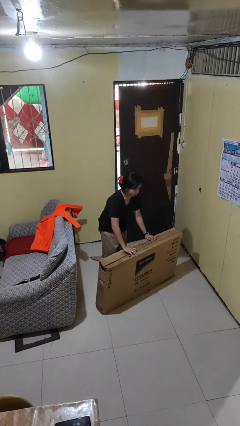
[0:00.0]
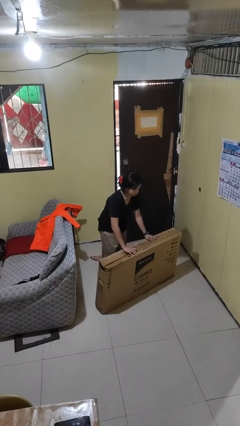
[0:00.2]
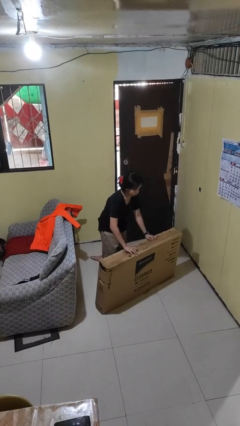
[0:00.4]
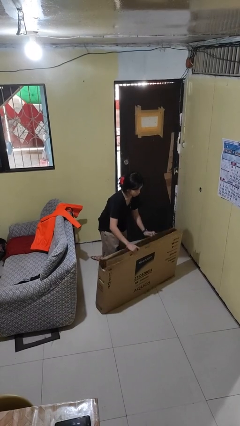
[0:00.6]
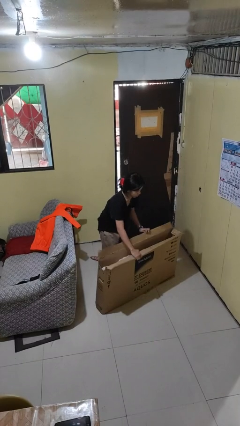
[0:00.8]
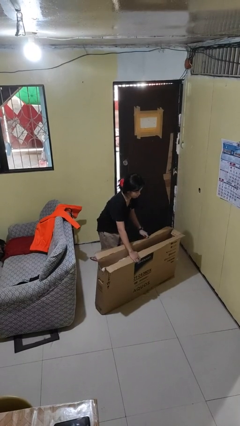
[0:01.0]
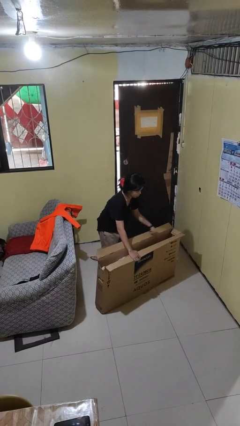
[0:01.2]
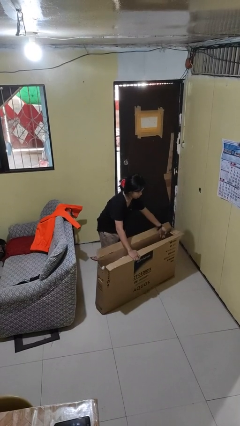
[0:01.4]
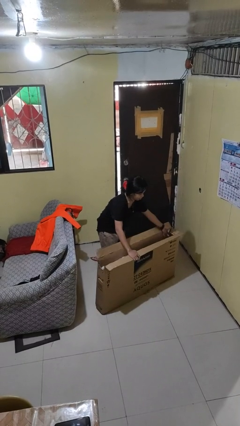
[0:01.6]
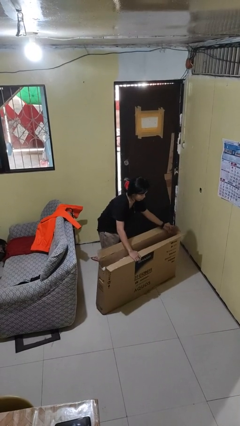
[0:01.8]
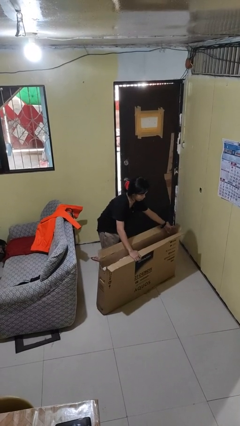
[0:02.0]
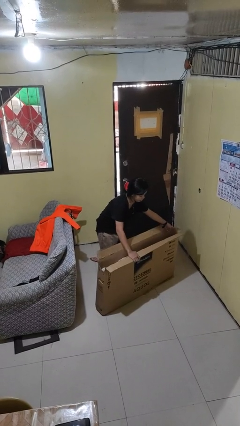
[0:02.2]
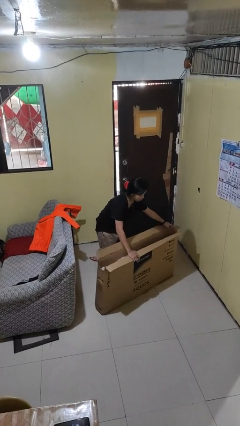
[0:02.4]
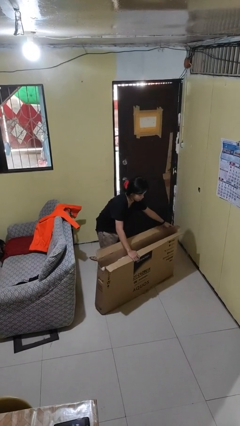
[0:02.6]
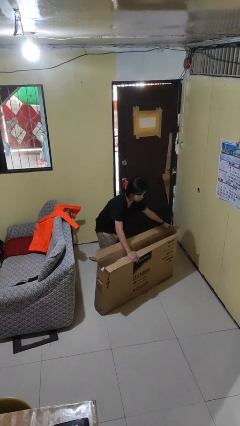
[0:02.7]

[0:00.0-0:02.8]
person opens box

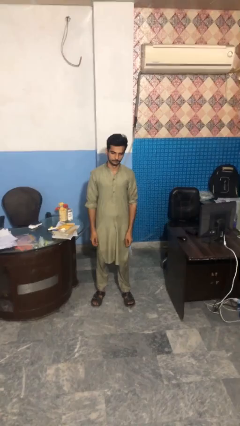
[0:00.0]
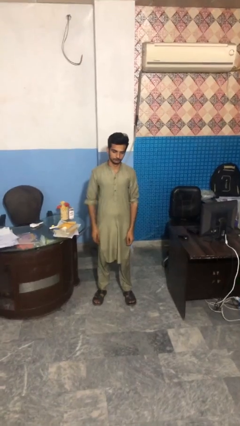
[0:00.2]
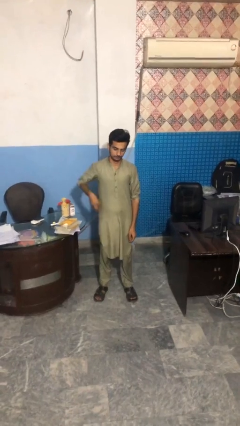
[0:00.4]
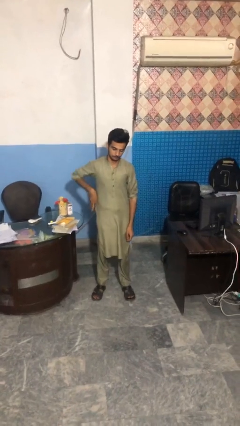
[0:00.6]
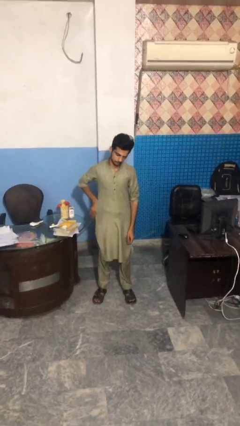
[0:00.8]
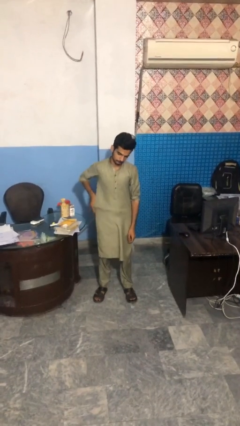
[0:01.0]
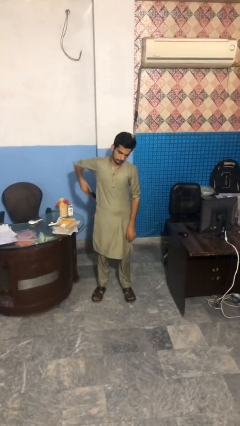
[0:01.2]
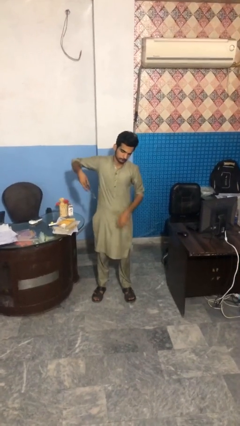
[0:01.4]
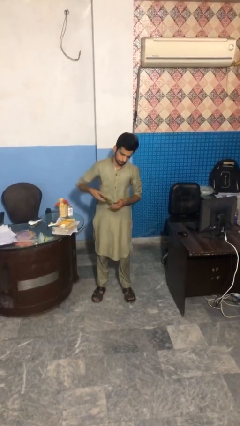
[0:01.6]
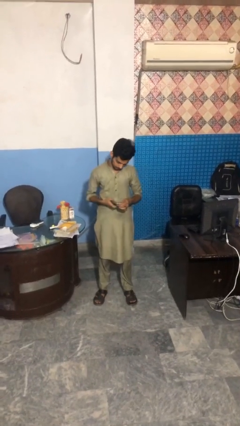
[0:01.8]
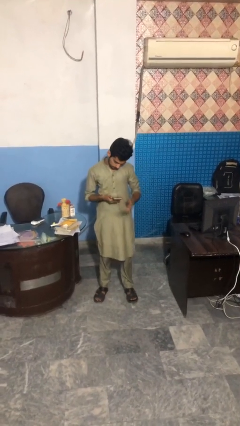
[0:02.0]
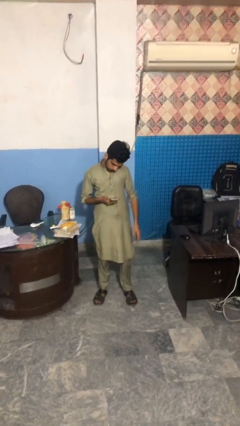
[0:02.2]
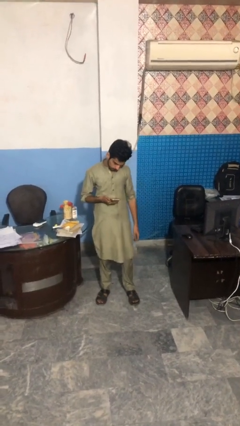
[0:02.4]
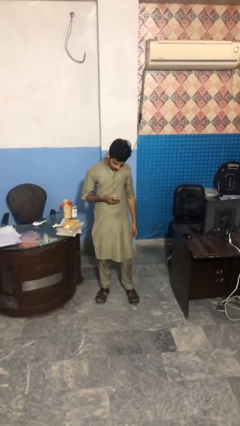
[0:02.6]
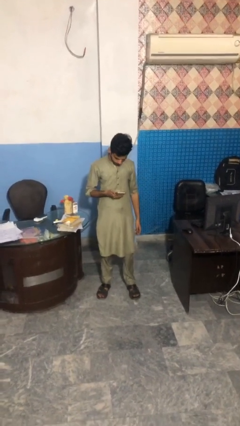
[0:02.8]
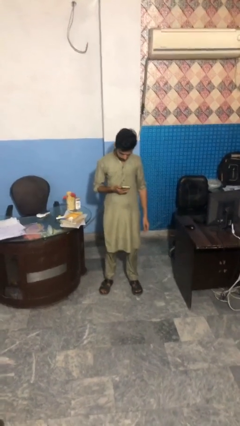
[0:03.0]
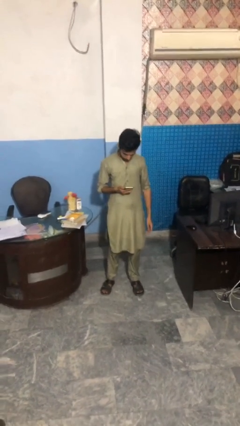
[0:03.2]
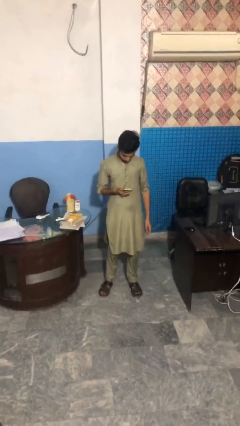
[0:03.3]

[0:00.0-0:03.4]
person takes phone from pocket

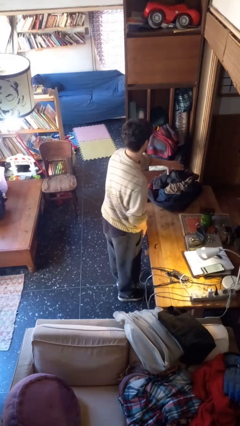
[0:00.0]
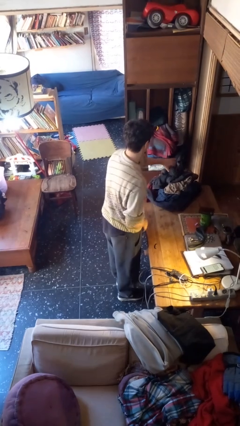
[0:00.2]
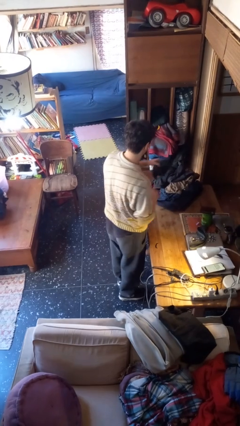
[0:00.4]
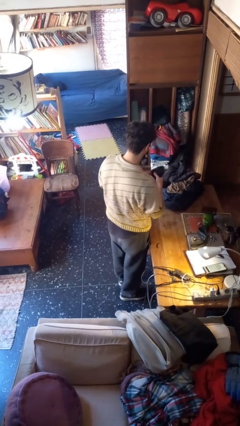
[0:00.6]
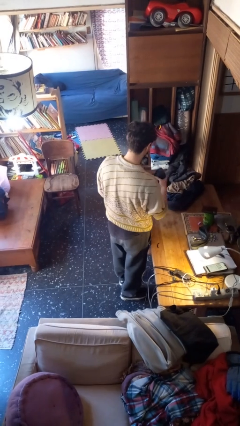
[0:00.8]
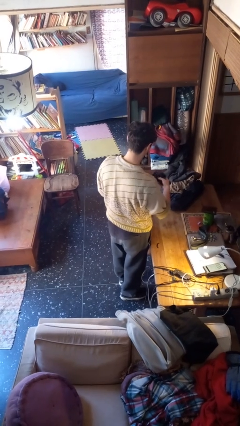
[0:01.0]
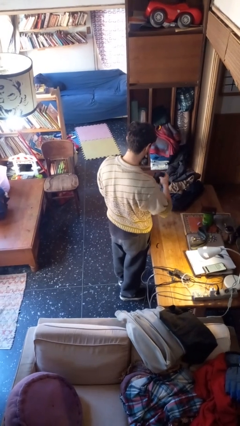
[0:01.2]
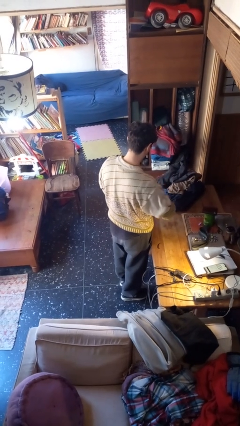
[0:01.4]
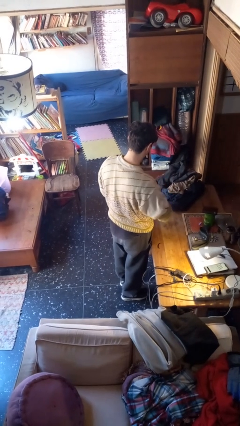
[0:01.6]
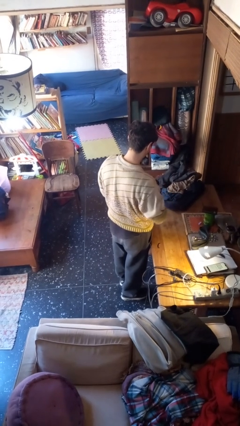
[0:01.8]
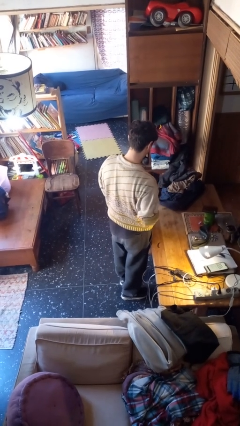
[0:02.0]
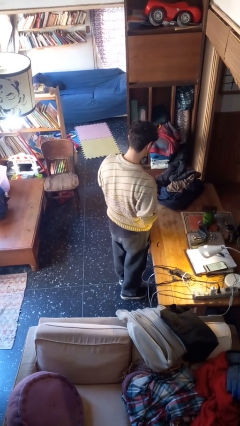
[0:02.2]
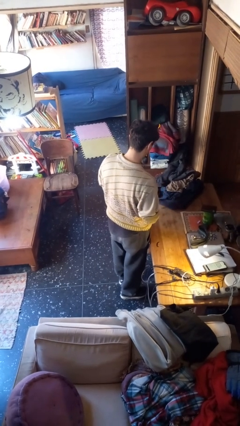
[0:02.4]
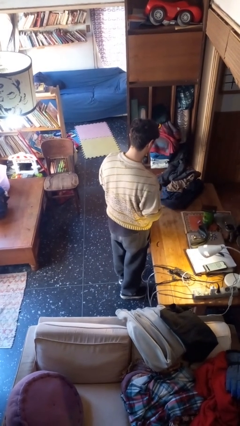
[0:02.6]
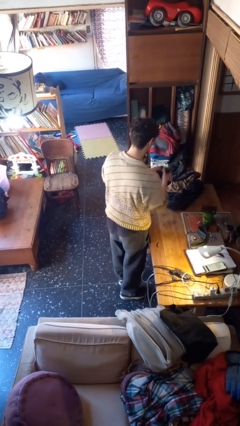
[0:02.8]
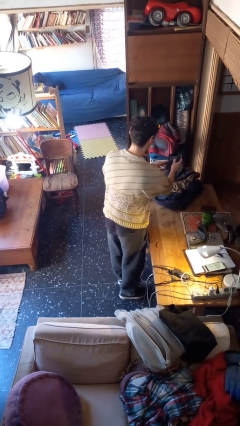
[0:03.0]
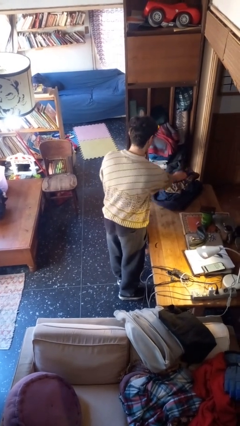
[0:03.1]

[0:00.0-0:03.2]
person folds socks

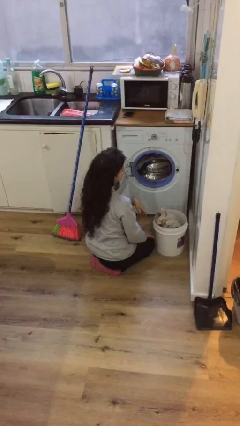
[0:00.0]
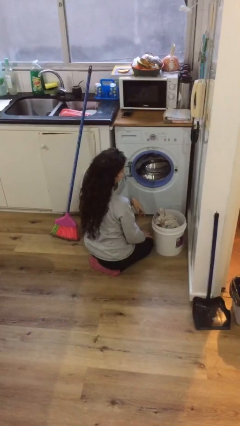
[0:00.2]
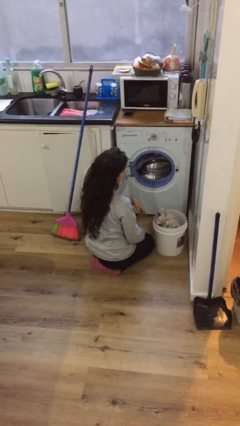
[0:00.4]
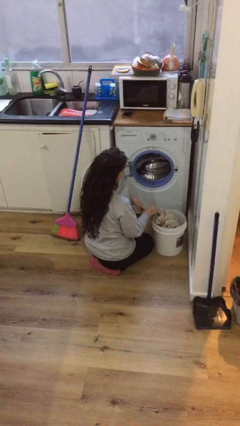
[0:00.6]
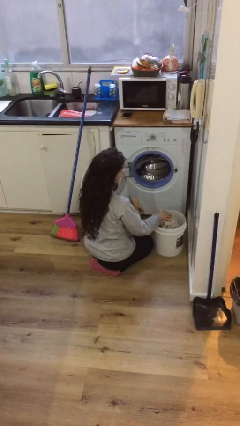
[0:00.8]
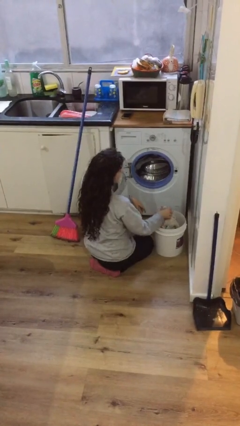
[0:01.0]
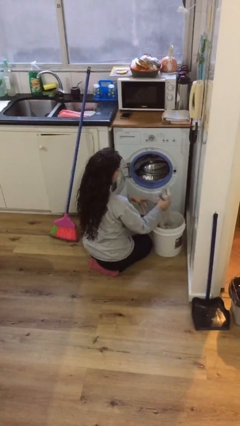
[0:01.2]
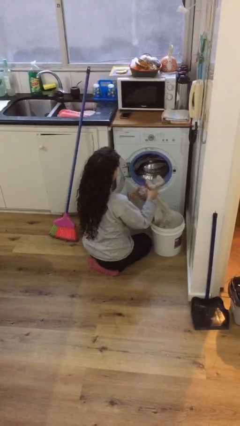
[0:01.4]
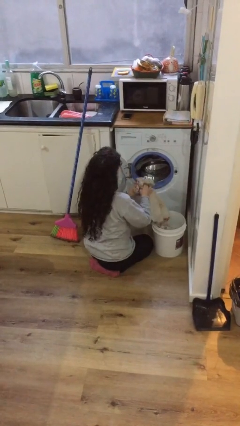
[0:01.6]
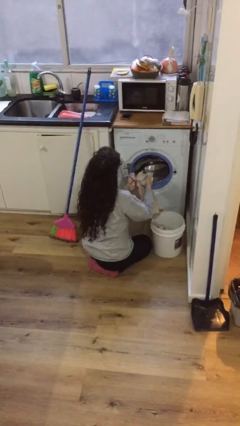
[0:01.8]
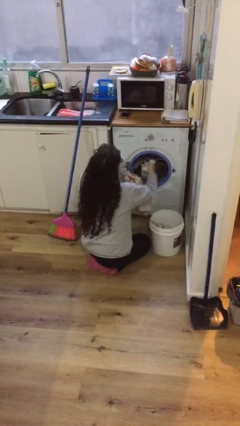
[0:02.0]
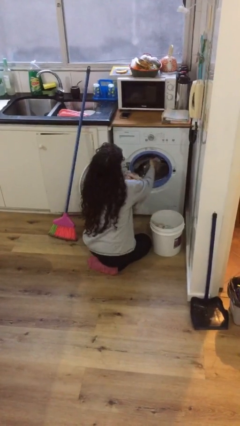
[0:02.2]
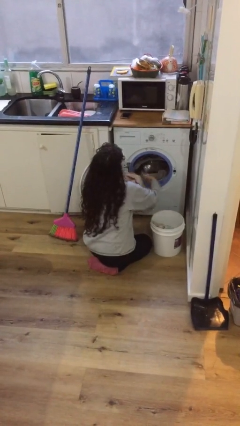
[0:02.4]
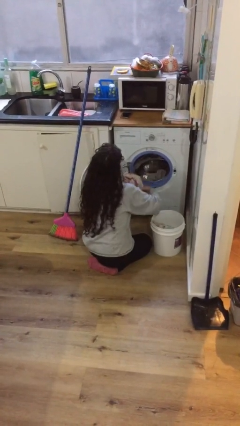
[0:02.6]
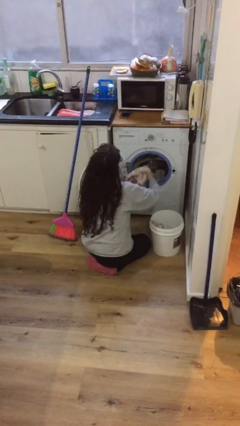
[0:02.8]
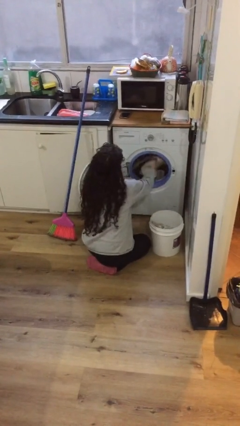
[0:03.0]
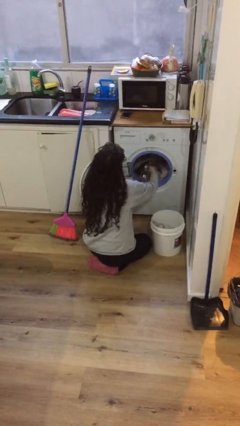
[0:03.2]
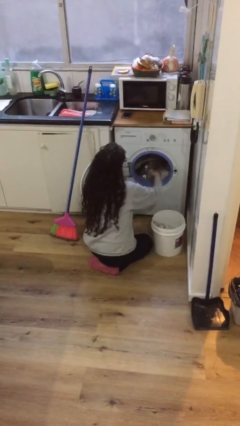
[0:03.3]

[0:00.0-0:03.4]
person loads clotheswasher

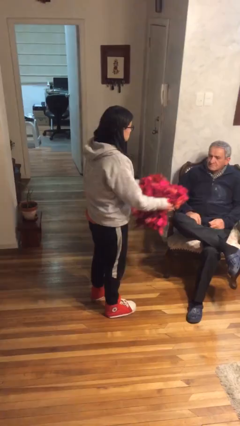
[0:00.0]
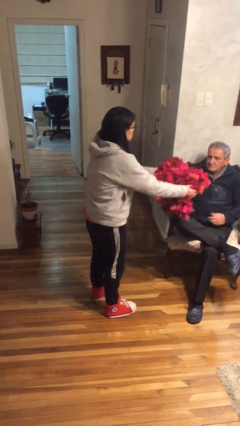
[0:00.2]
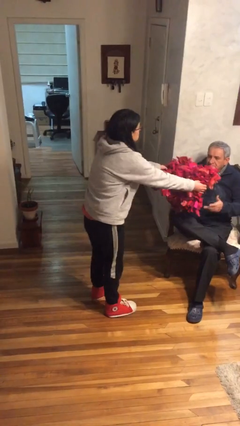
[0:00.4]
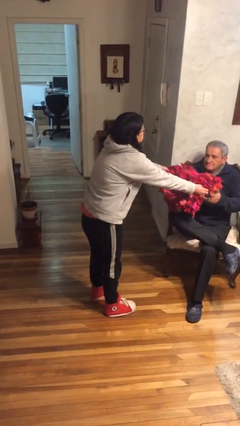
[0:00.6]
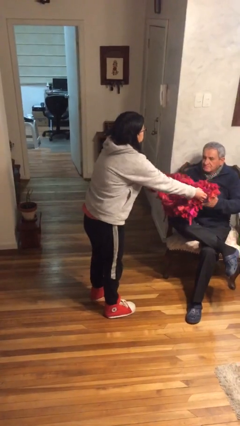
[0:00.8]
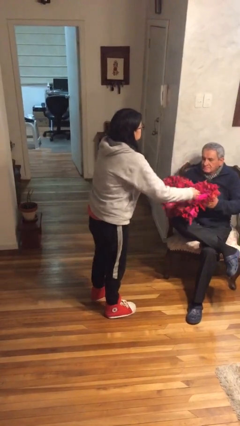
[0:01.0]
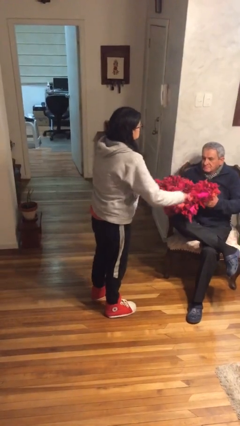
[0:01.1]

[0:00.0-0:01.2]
person transfers object to person

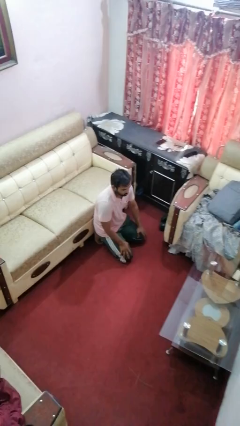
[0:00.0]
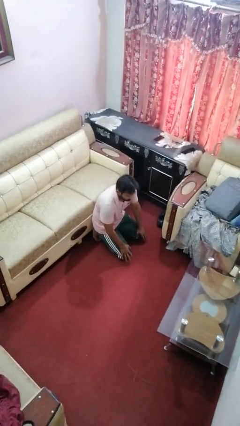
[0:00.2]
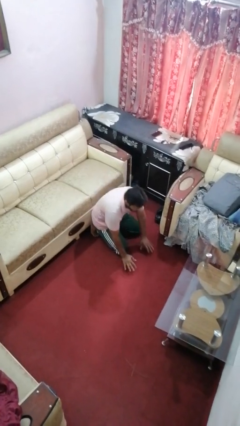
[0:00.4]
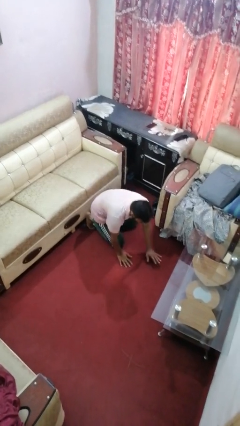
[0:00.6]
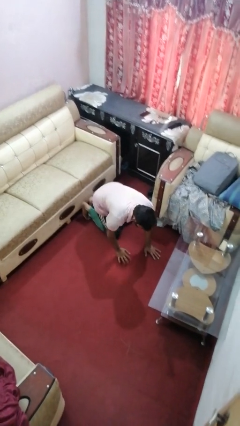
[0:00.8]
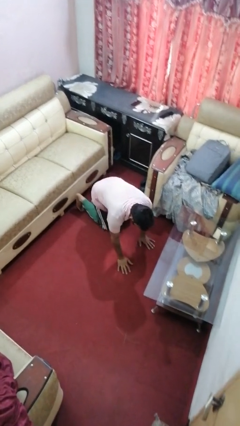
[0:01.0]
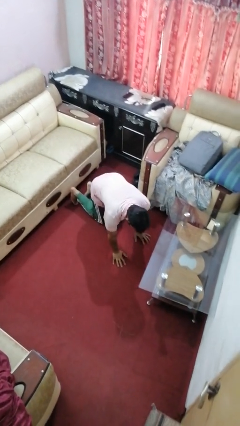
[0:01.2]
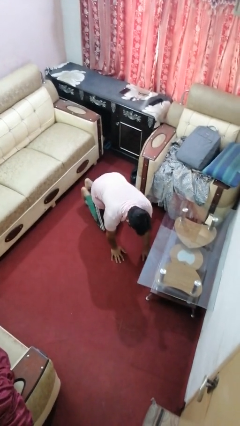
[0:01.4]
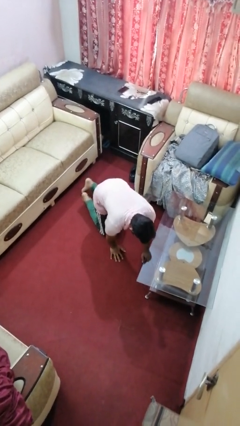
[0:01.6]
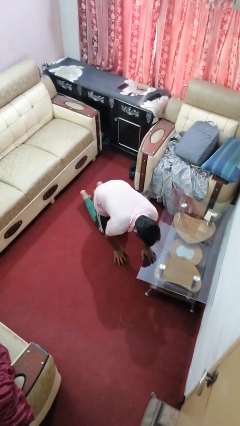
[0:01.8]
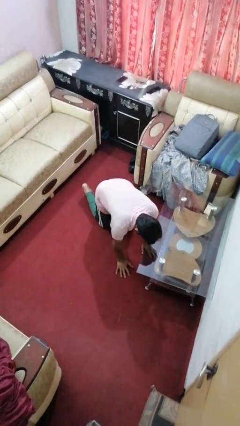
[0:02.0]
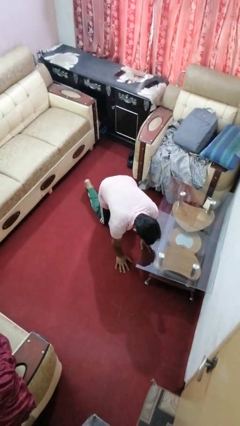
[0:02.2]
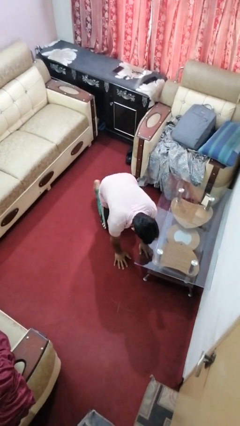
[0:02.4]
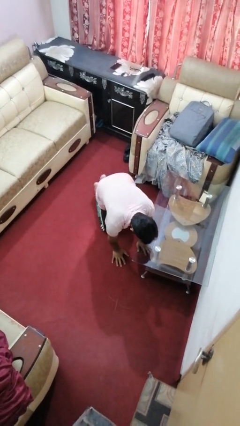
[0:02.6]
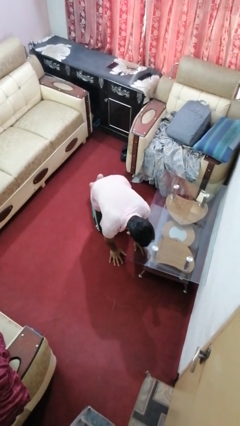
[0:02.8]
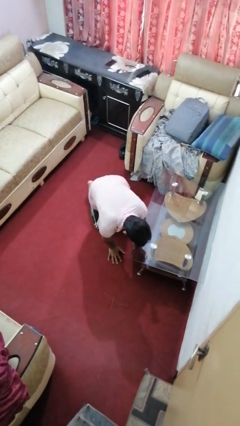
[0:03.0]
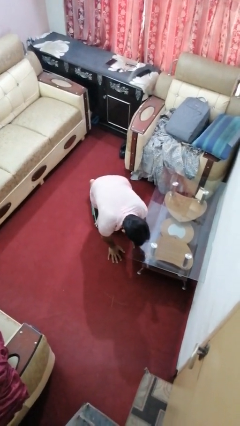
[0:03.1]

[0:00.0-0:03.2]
person crawls
